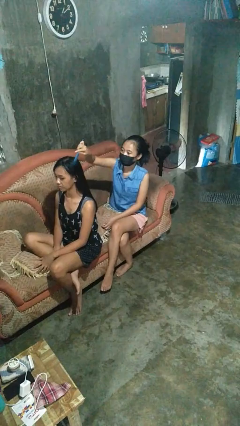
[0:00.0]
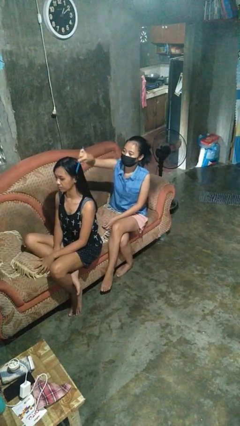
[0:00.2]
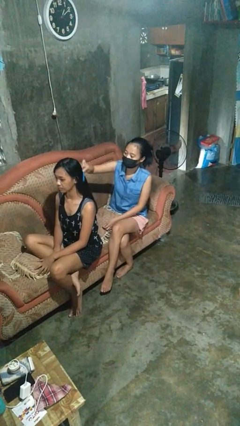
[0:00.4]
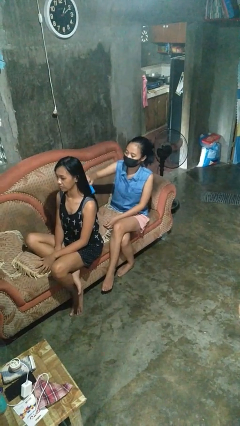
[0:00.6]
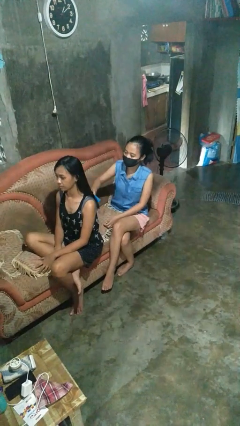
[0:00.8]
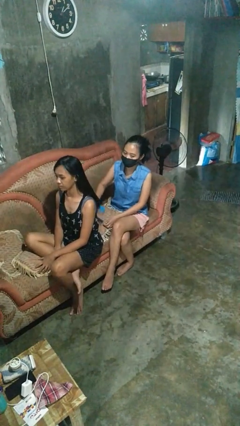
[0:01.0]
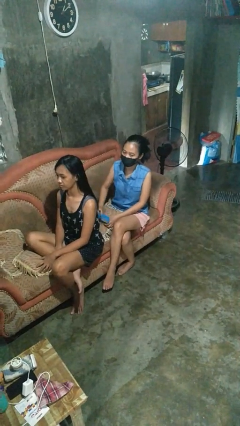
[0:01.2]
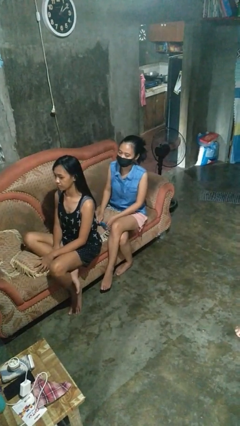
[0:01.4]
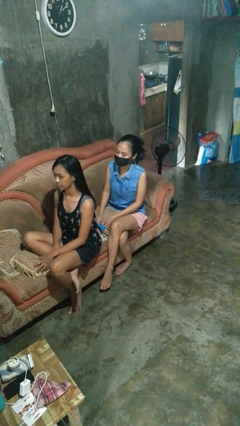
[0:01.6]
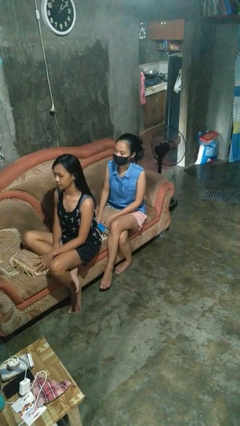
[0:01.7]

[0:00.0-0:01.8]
person brushes hair of person

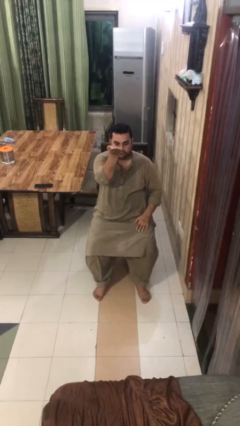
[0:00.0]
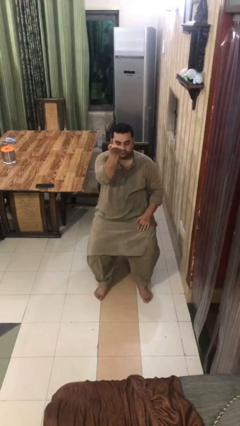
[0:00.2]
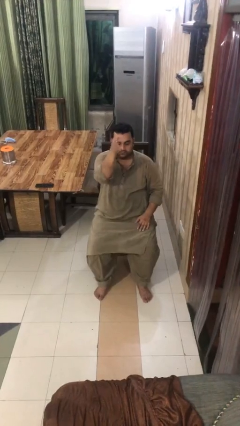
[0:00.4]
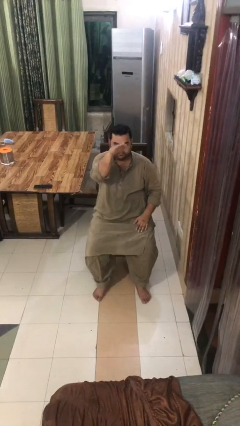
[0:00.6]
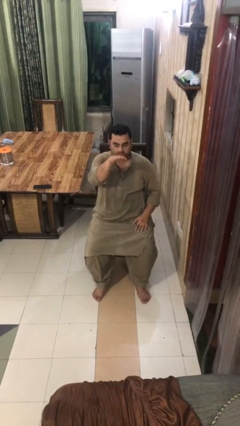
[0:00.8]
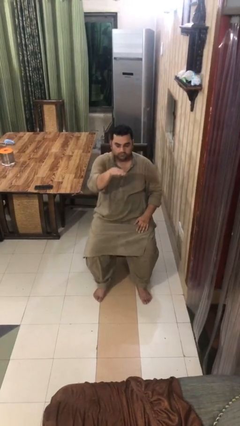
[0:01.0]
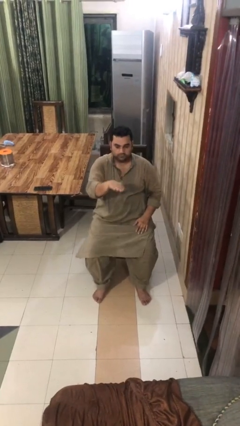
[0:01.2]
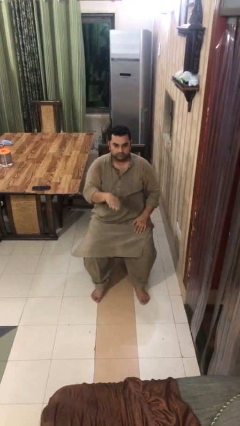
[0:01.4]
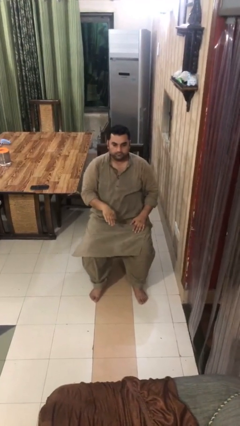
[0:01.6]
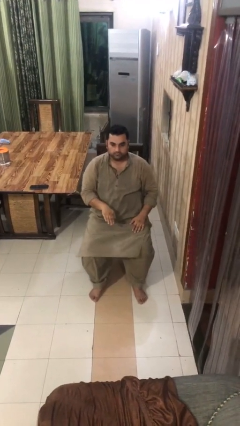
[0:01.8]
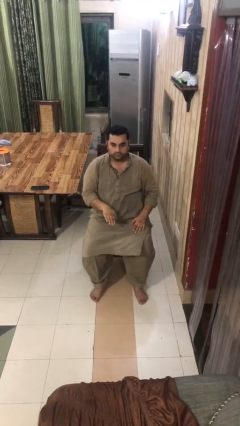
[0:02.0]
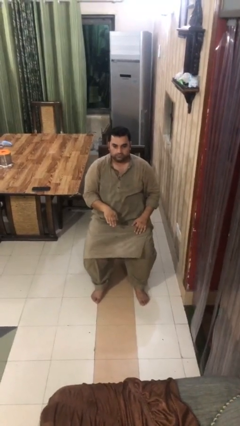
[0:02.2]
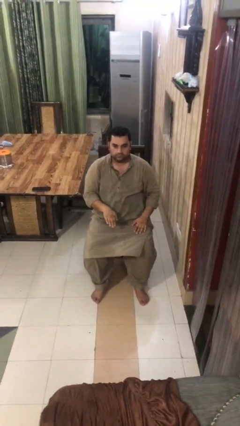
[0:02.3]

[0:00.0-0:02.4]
person gestures swipe down

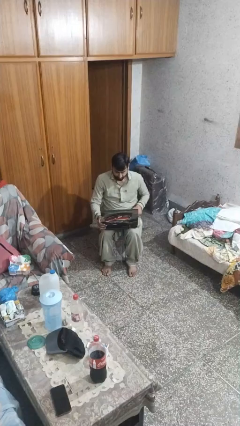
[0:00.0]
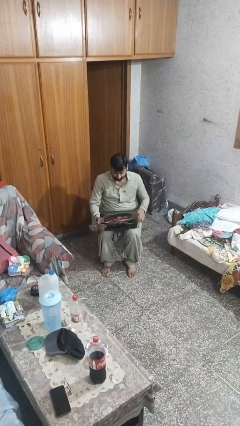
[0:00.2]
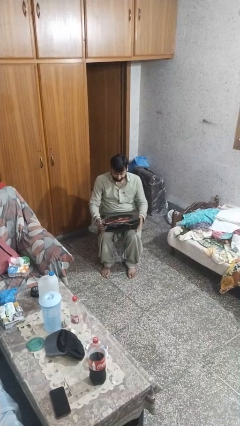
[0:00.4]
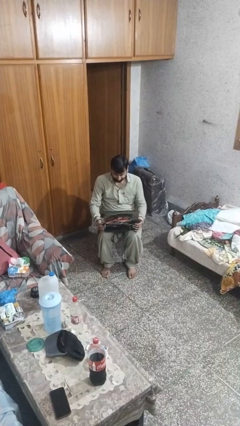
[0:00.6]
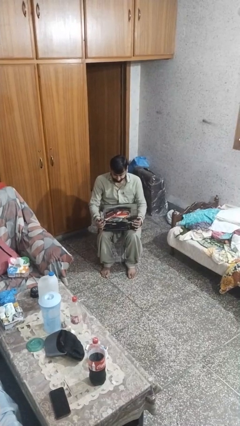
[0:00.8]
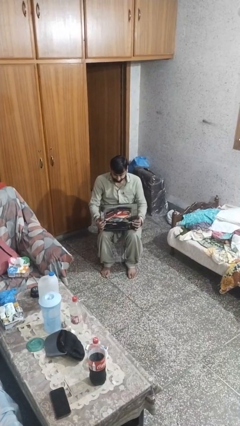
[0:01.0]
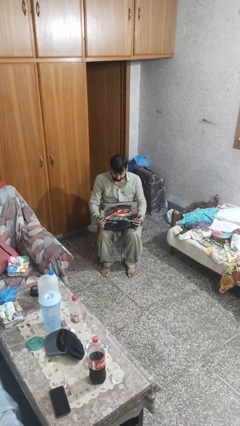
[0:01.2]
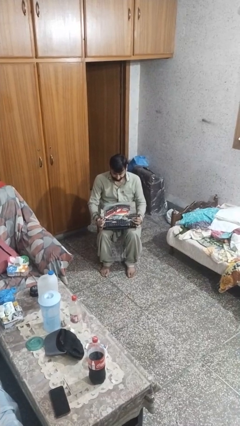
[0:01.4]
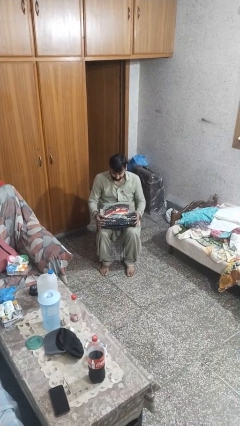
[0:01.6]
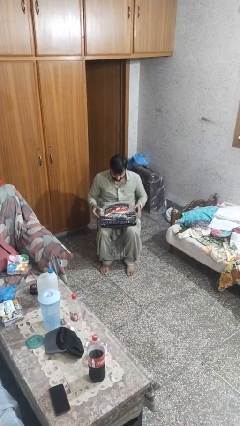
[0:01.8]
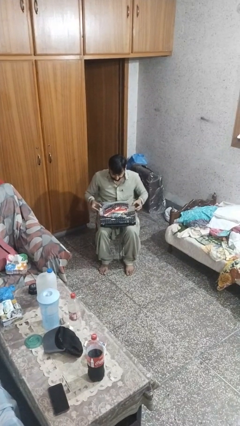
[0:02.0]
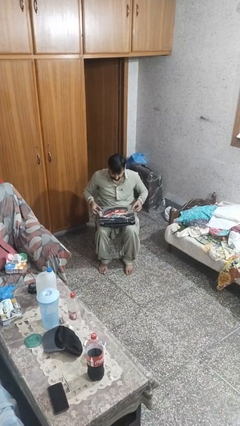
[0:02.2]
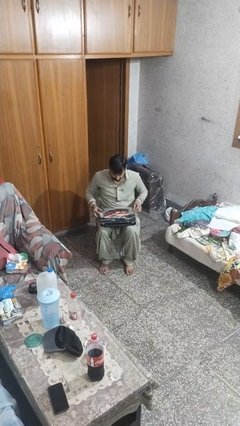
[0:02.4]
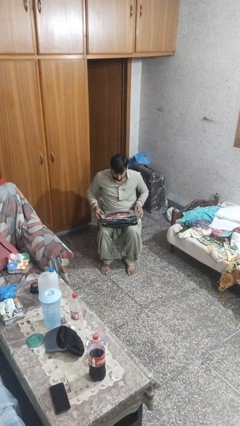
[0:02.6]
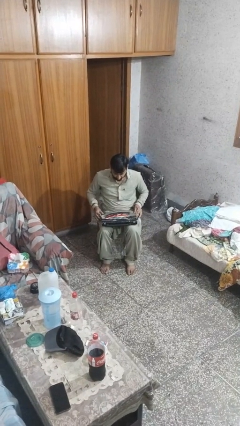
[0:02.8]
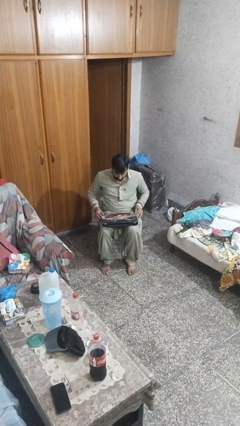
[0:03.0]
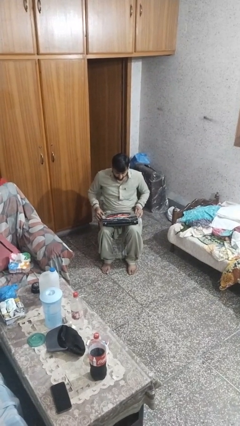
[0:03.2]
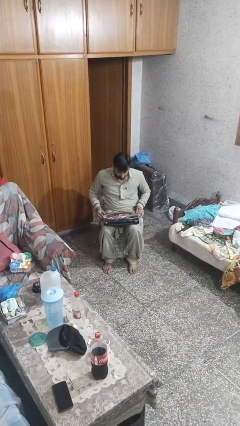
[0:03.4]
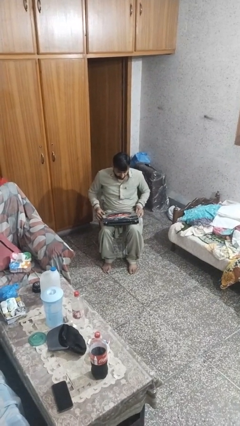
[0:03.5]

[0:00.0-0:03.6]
person closes laptop
